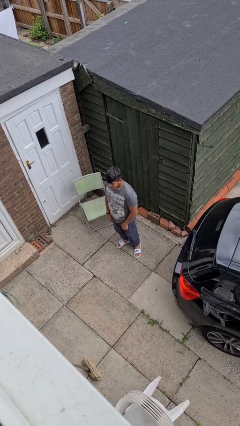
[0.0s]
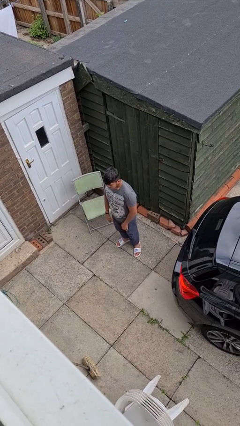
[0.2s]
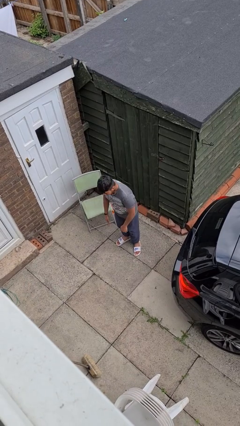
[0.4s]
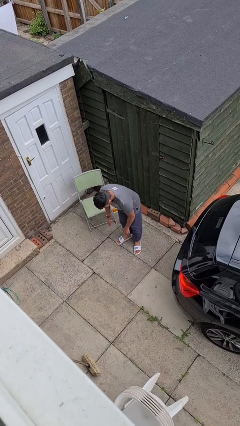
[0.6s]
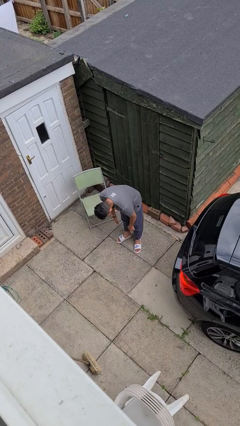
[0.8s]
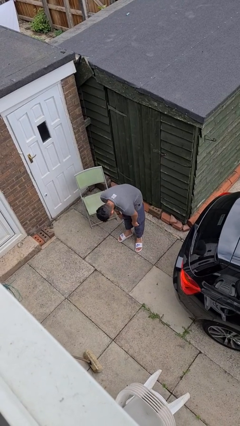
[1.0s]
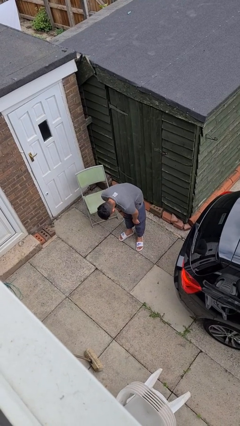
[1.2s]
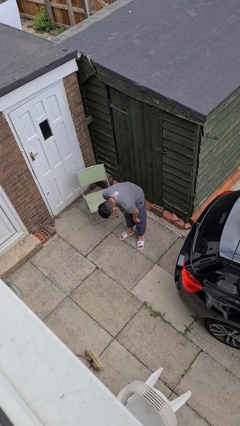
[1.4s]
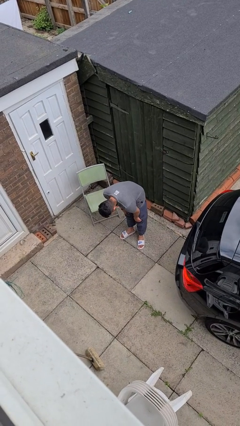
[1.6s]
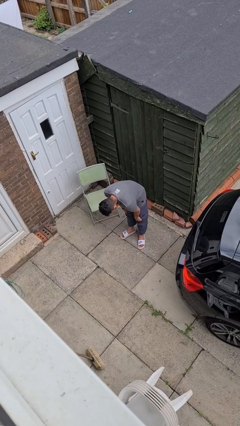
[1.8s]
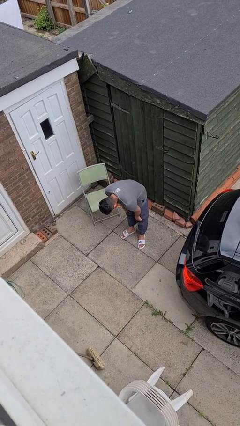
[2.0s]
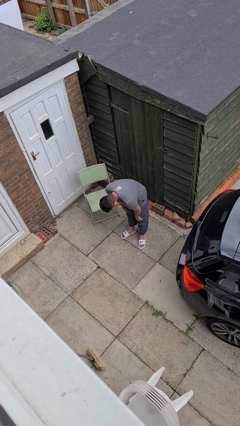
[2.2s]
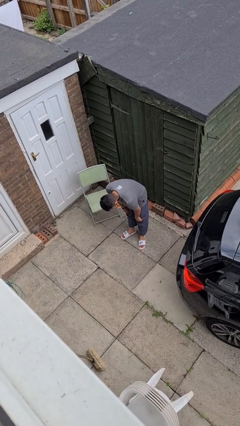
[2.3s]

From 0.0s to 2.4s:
person bows

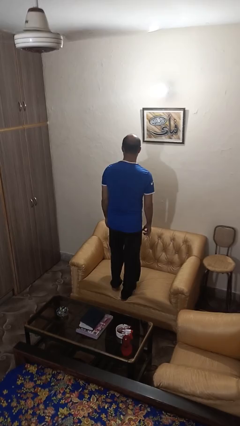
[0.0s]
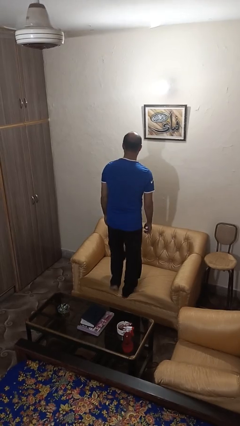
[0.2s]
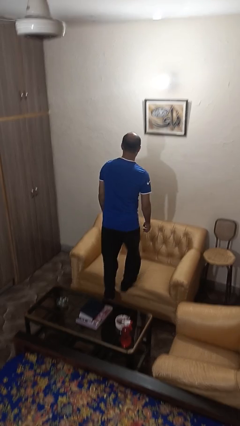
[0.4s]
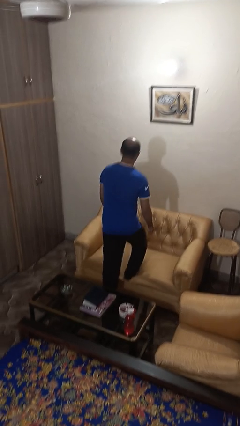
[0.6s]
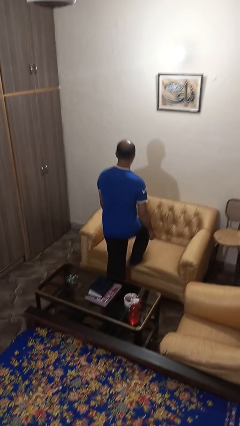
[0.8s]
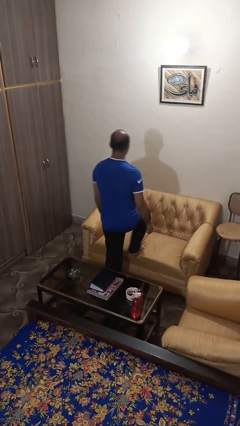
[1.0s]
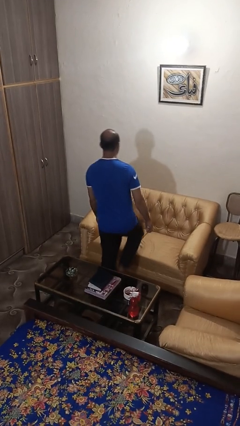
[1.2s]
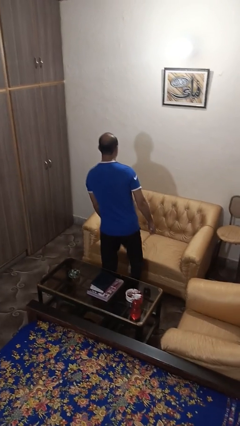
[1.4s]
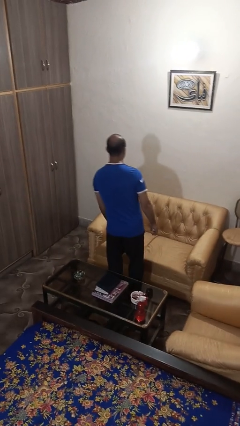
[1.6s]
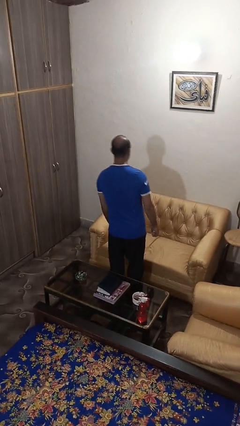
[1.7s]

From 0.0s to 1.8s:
person climbs off couch

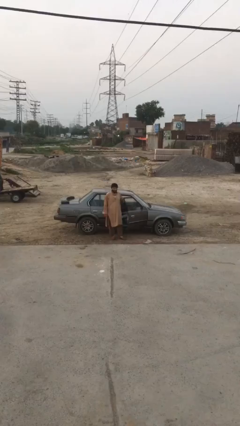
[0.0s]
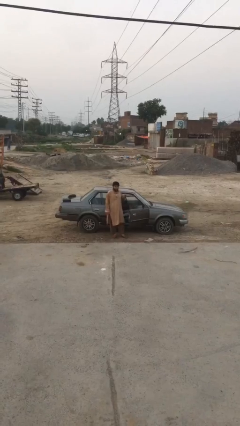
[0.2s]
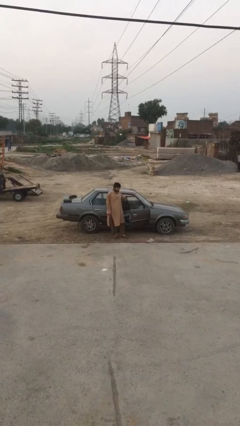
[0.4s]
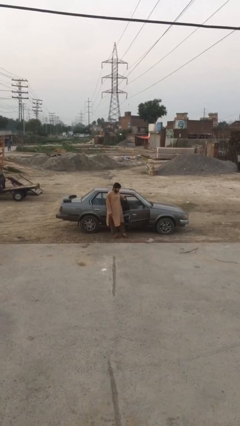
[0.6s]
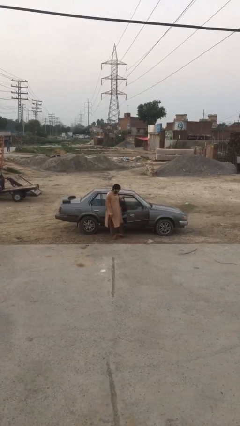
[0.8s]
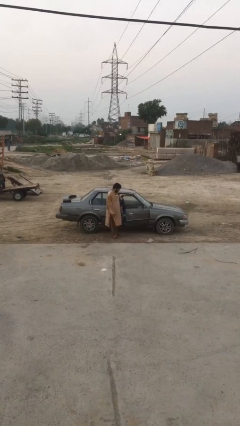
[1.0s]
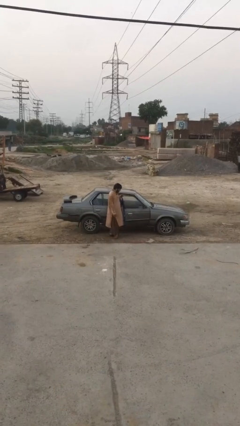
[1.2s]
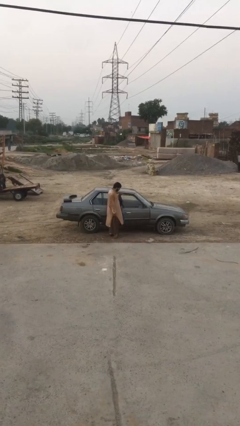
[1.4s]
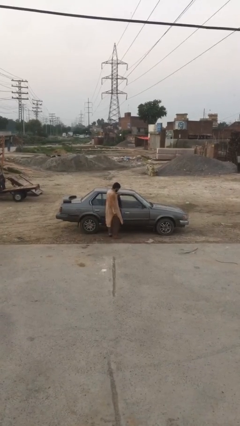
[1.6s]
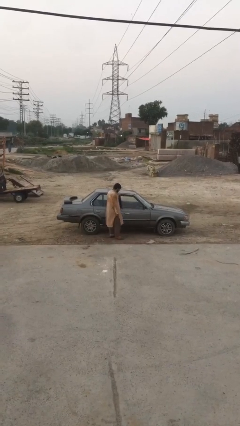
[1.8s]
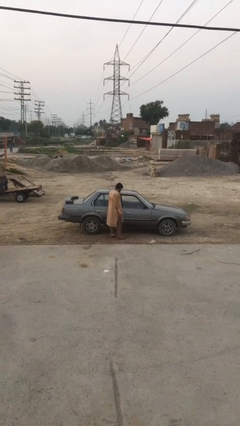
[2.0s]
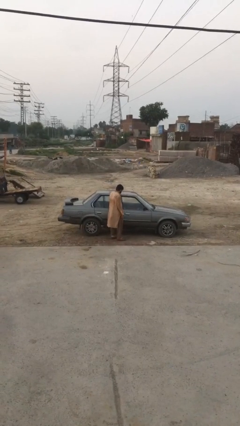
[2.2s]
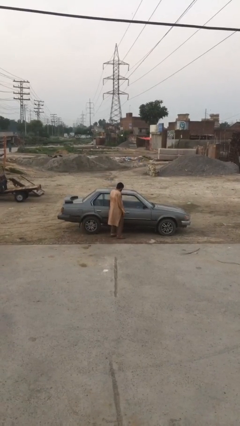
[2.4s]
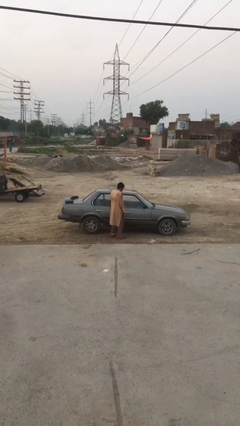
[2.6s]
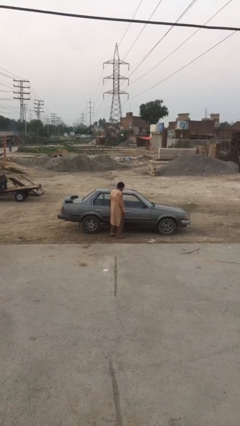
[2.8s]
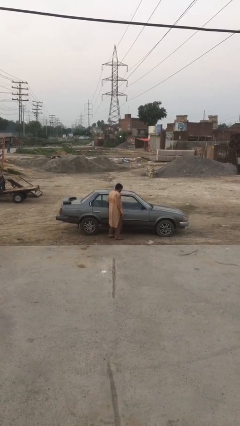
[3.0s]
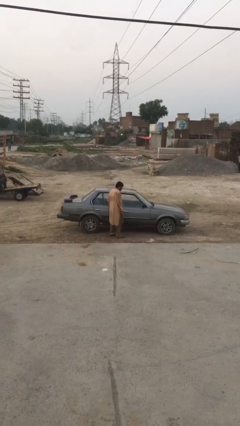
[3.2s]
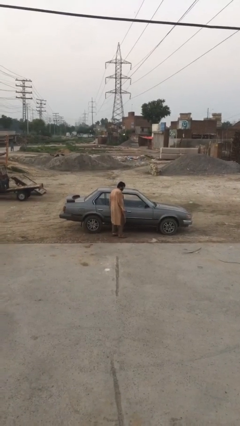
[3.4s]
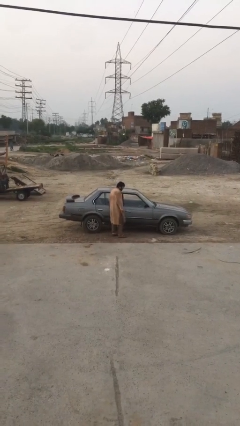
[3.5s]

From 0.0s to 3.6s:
person closes car door

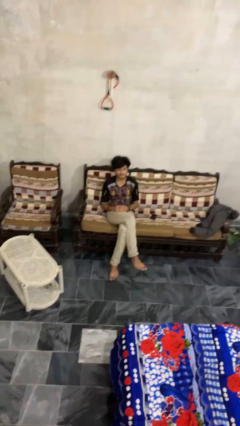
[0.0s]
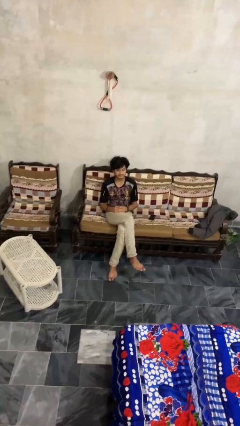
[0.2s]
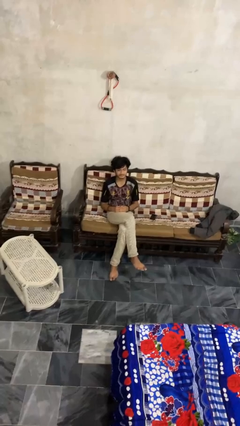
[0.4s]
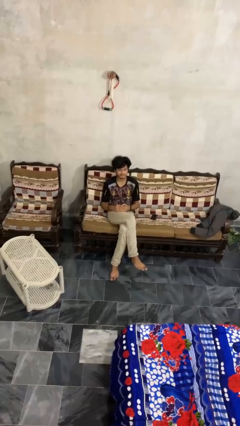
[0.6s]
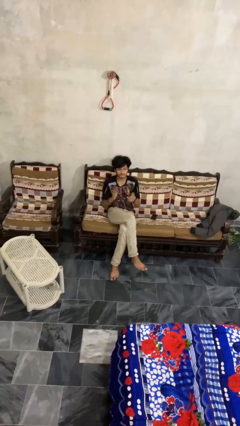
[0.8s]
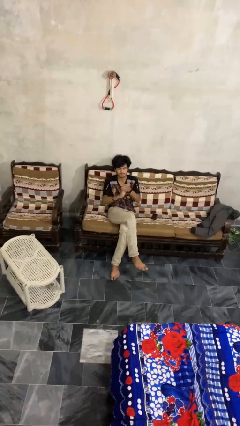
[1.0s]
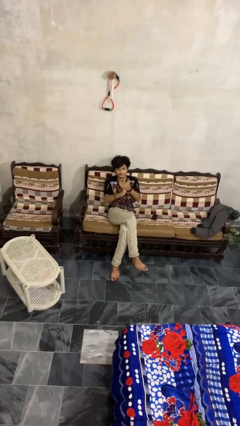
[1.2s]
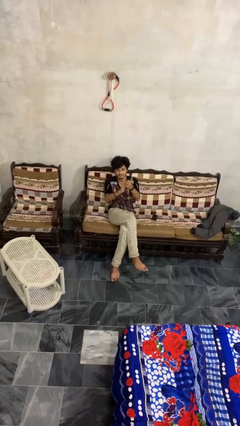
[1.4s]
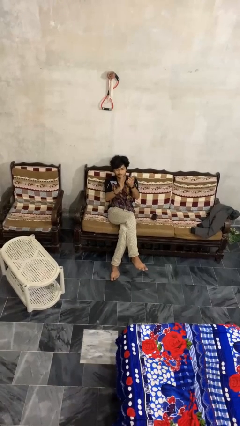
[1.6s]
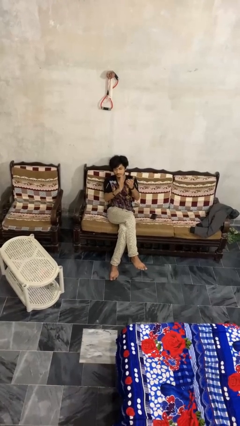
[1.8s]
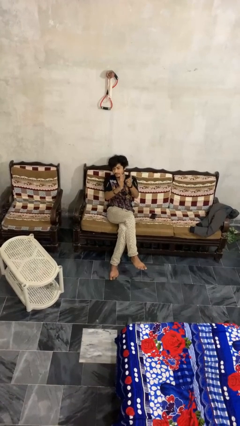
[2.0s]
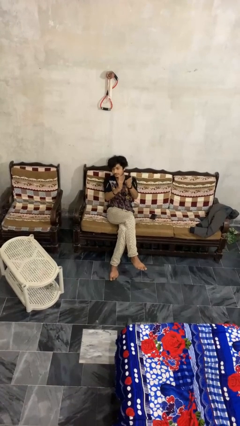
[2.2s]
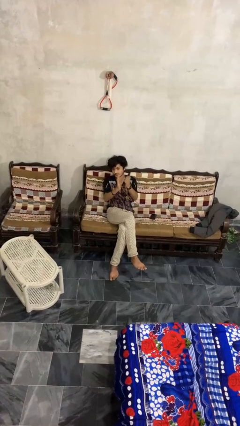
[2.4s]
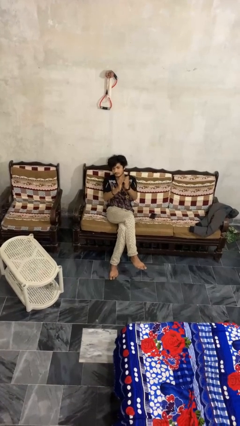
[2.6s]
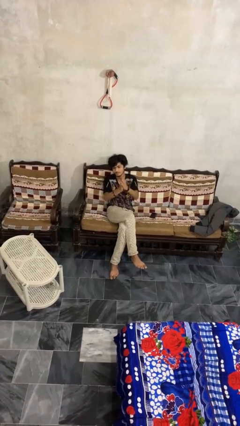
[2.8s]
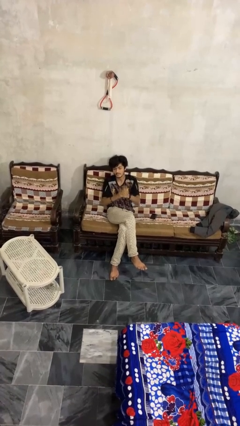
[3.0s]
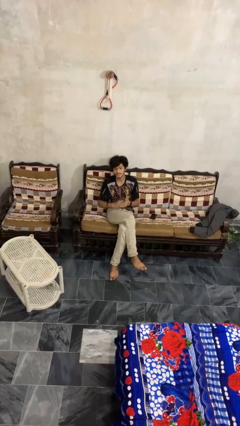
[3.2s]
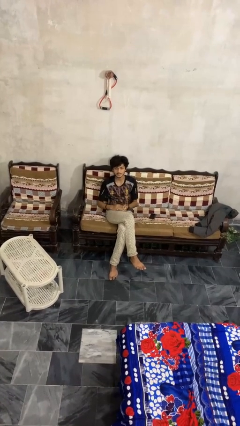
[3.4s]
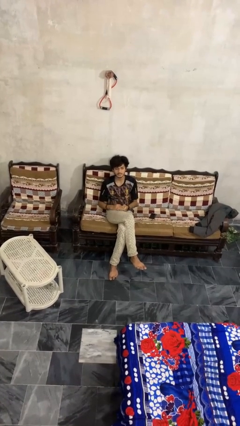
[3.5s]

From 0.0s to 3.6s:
person claps hands

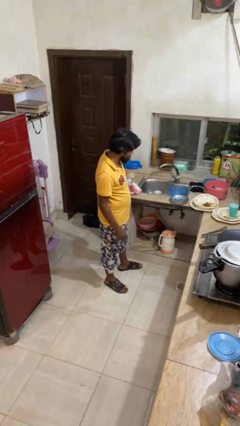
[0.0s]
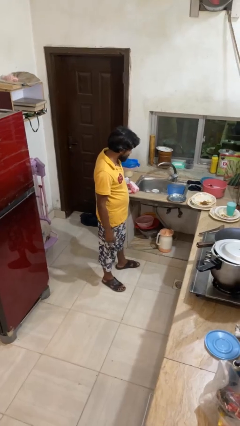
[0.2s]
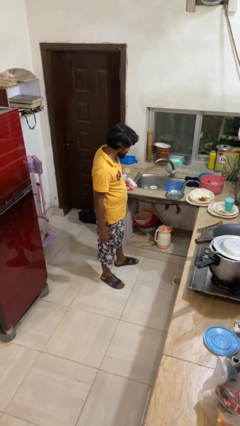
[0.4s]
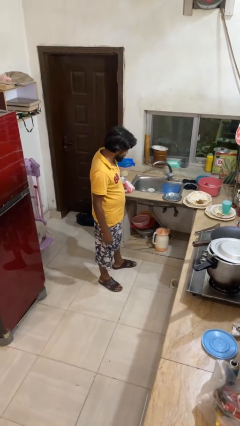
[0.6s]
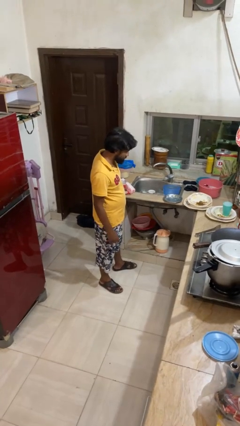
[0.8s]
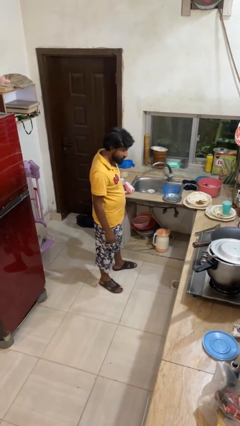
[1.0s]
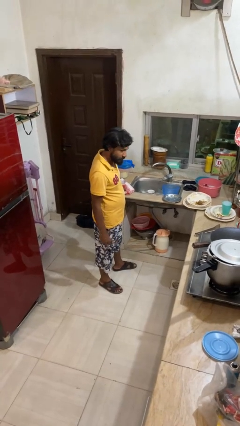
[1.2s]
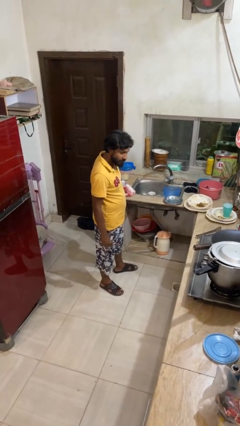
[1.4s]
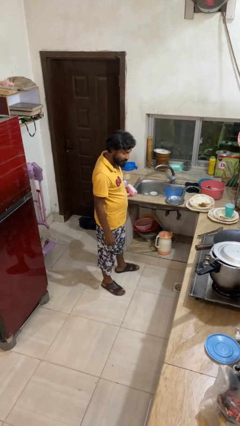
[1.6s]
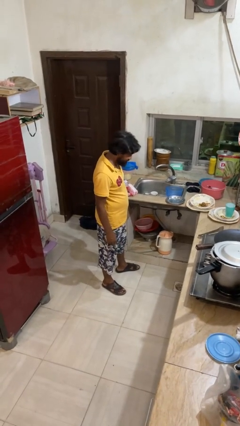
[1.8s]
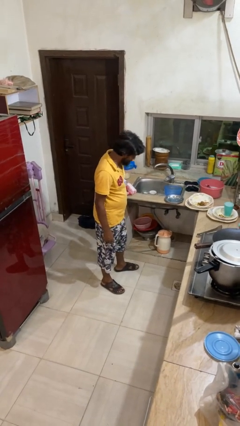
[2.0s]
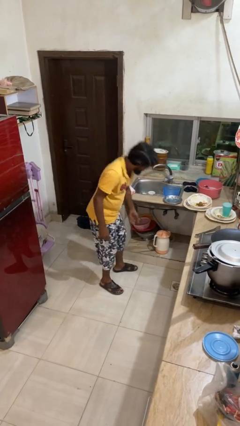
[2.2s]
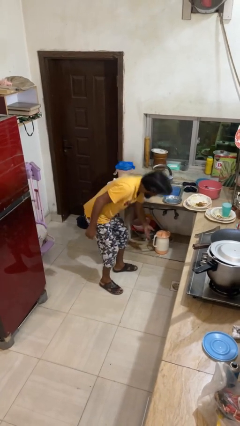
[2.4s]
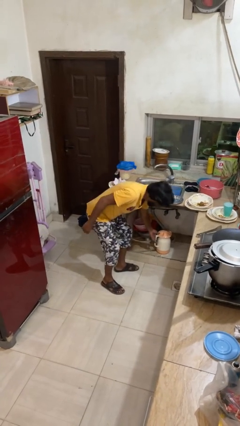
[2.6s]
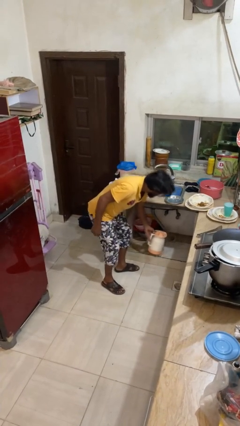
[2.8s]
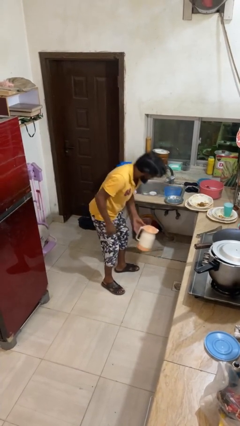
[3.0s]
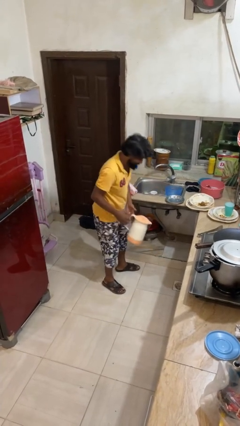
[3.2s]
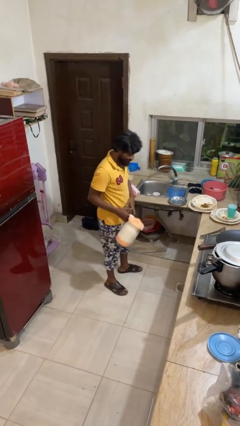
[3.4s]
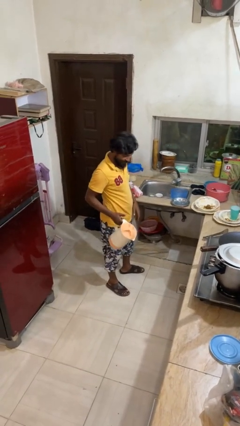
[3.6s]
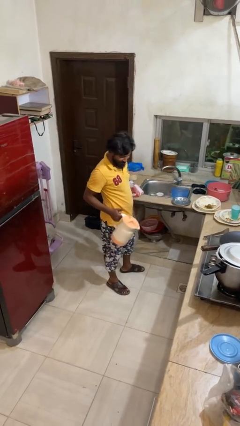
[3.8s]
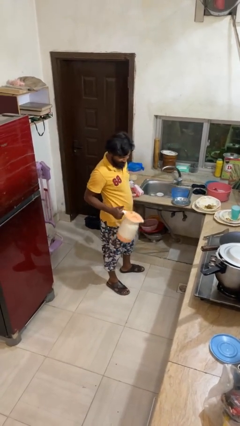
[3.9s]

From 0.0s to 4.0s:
person picks up object from cabinet

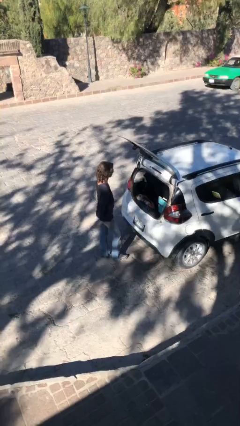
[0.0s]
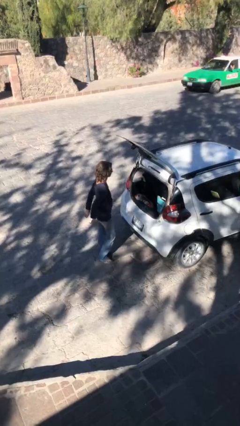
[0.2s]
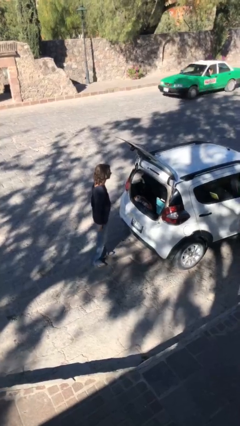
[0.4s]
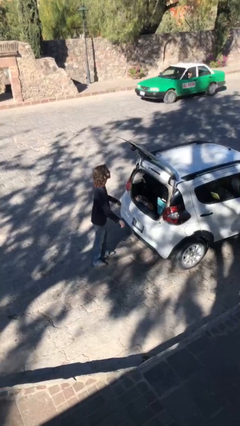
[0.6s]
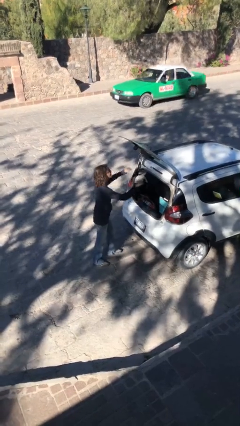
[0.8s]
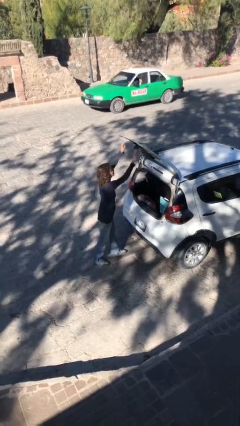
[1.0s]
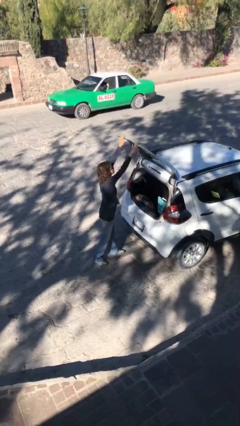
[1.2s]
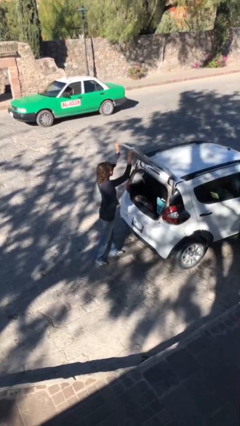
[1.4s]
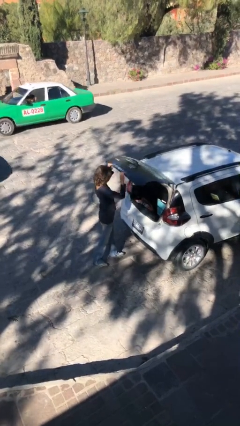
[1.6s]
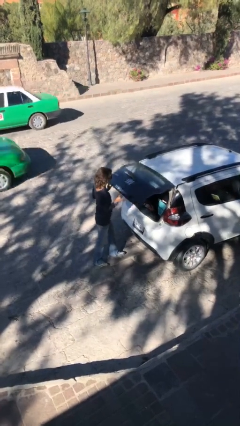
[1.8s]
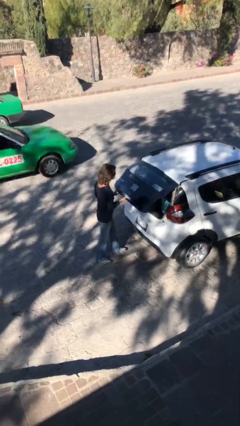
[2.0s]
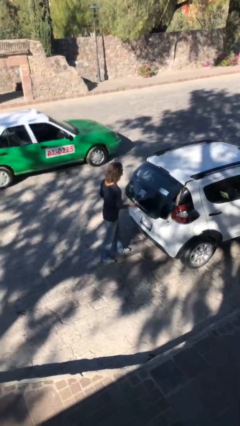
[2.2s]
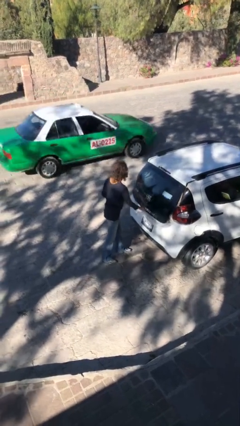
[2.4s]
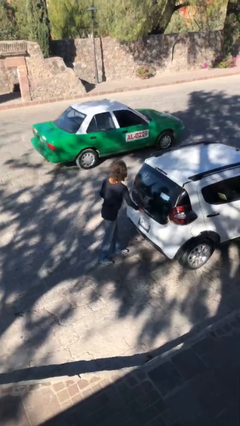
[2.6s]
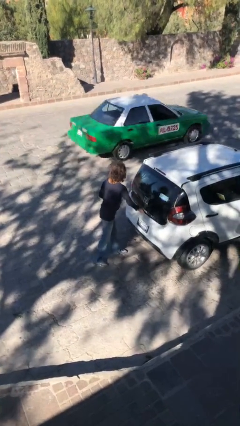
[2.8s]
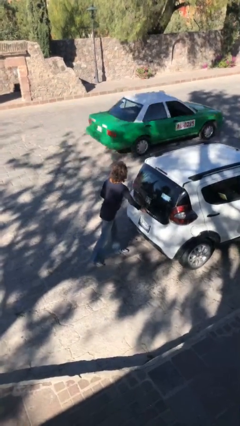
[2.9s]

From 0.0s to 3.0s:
person closes car trunk
